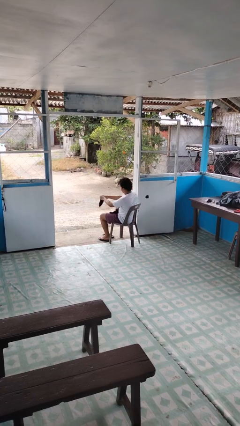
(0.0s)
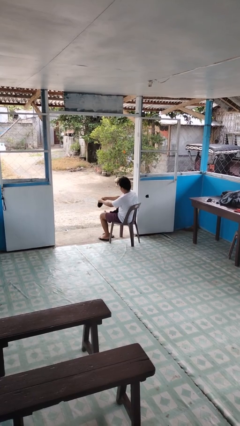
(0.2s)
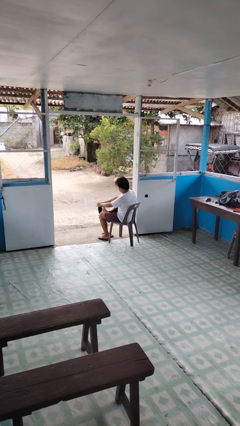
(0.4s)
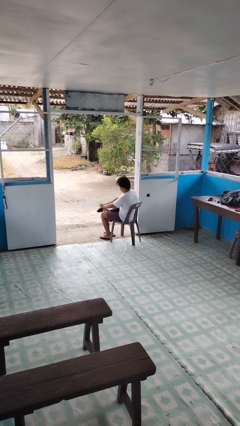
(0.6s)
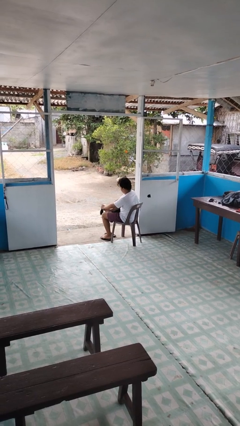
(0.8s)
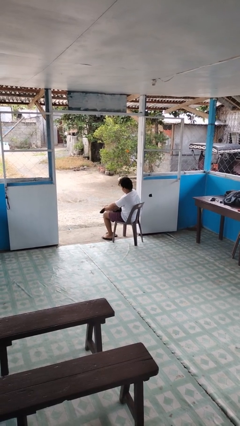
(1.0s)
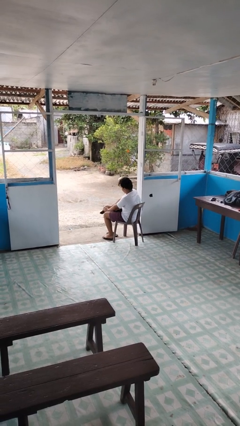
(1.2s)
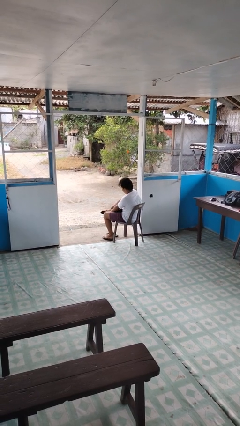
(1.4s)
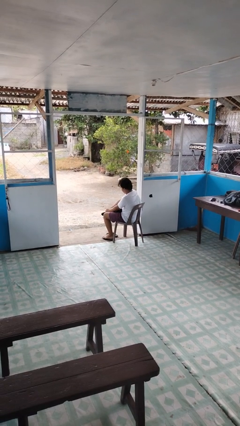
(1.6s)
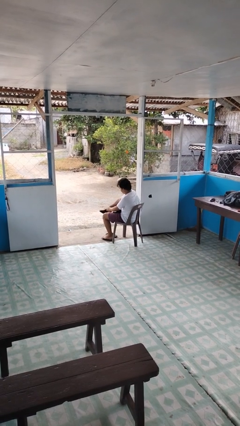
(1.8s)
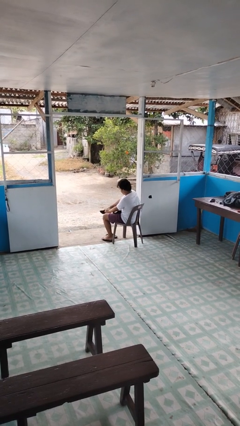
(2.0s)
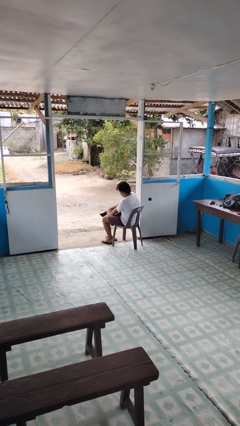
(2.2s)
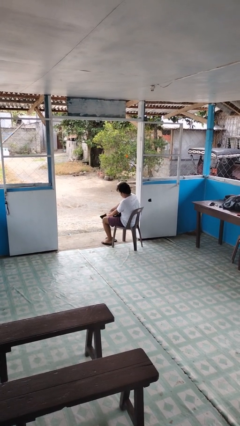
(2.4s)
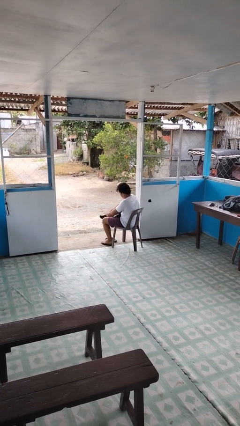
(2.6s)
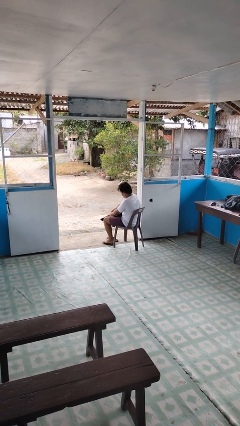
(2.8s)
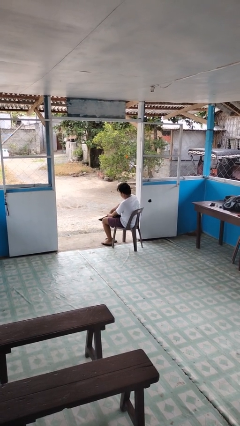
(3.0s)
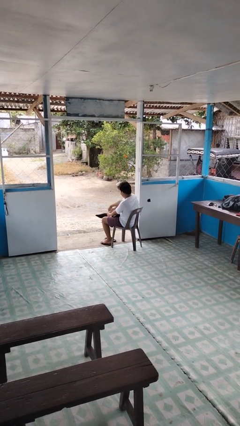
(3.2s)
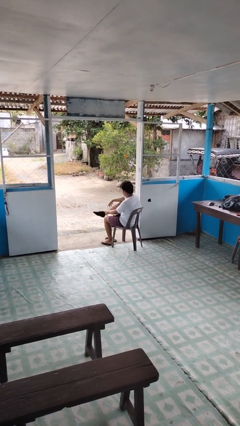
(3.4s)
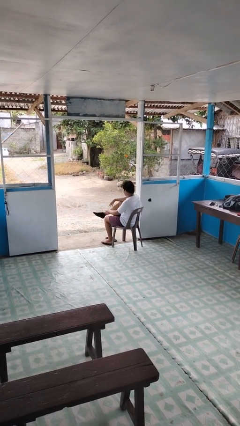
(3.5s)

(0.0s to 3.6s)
person puts on socks

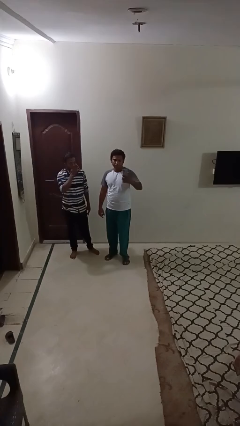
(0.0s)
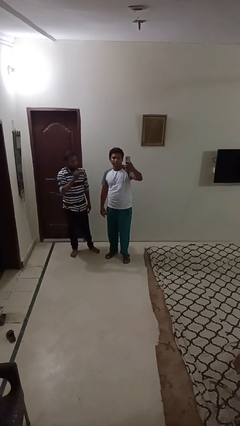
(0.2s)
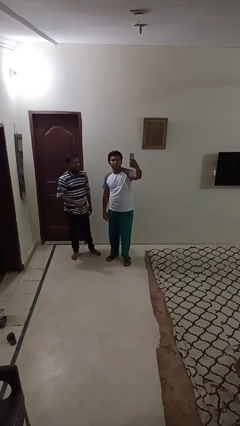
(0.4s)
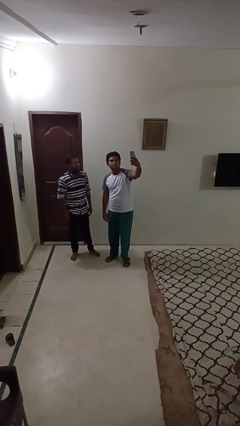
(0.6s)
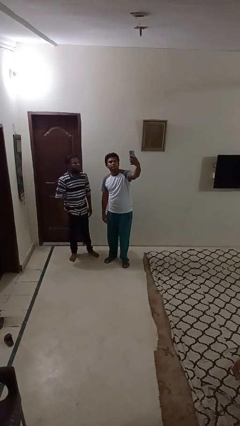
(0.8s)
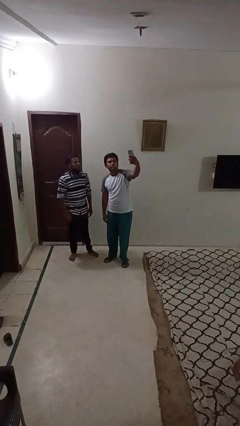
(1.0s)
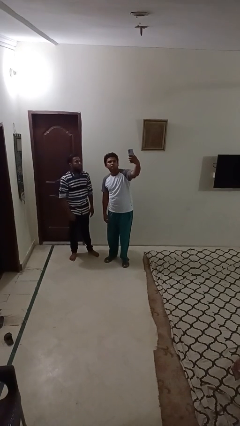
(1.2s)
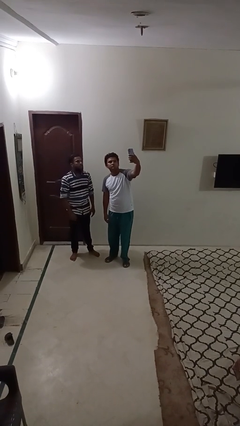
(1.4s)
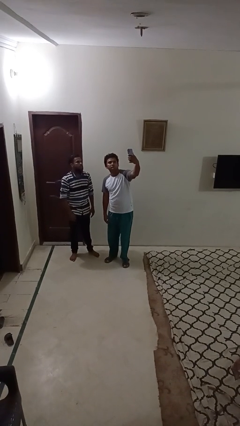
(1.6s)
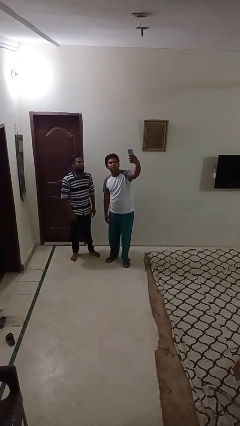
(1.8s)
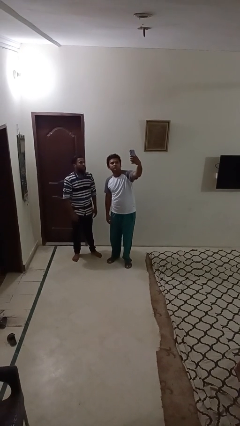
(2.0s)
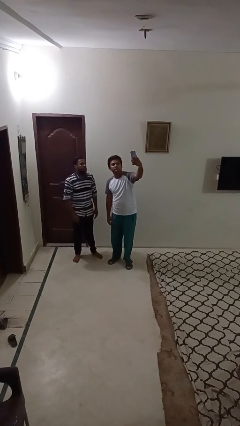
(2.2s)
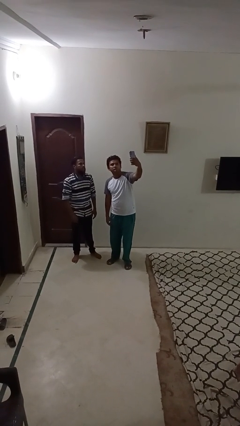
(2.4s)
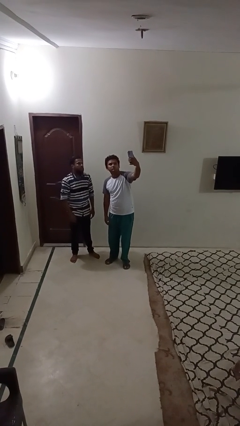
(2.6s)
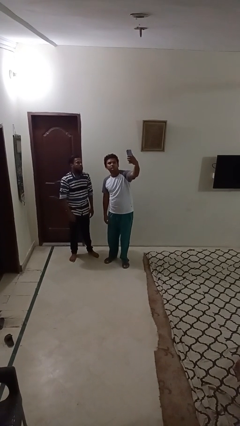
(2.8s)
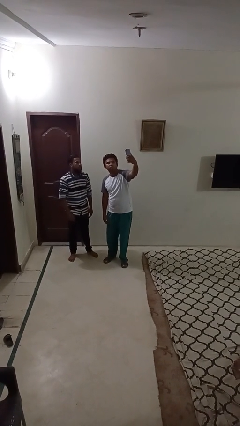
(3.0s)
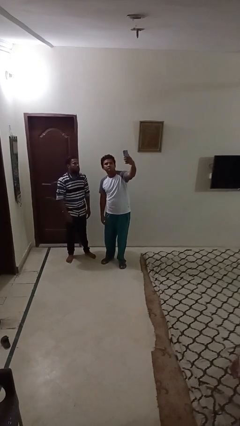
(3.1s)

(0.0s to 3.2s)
person takes selfie with person

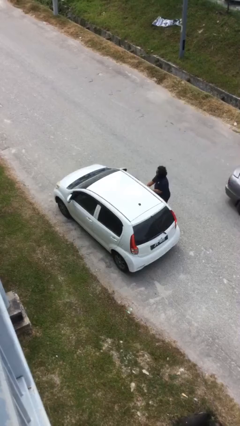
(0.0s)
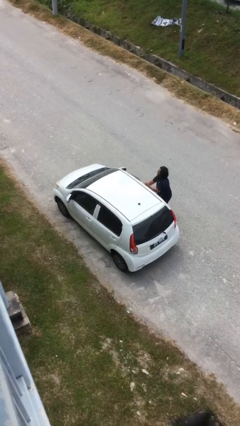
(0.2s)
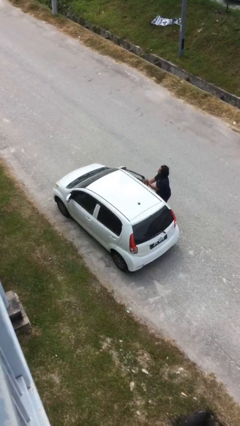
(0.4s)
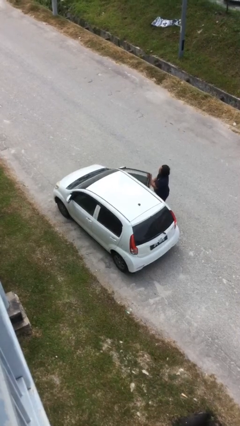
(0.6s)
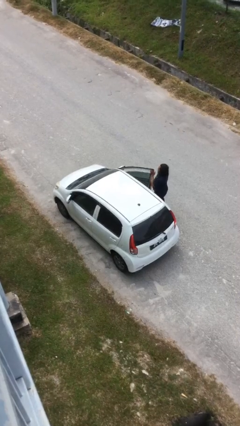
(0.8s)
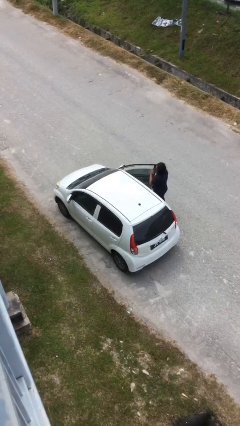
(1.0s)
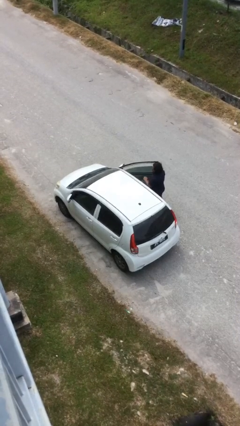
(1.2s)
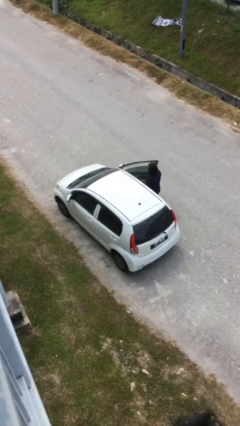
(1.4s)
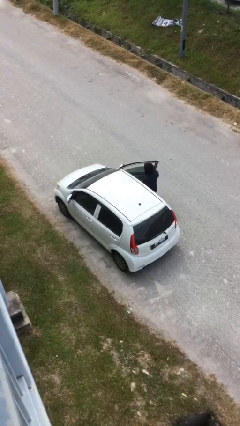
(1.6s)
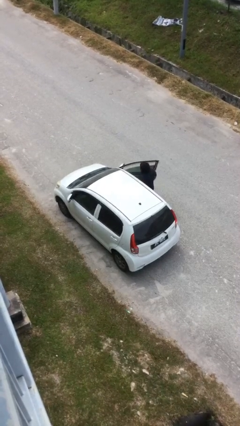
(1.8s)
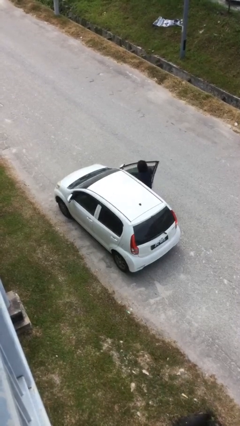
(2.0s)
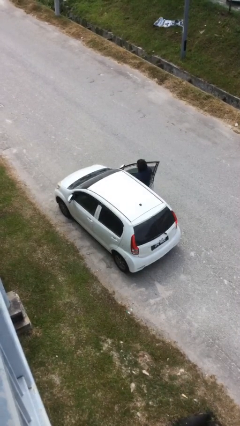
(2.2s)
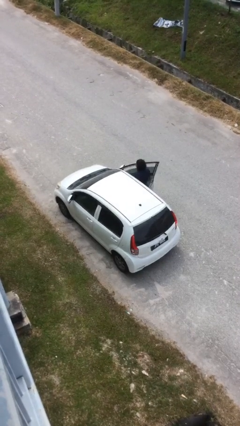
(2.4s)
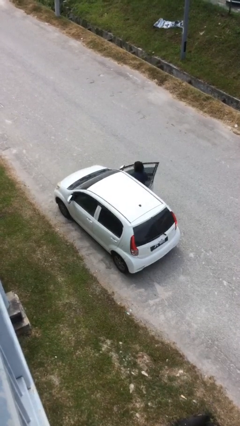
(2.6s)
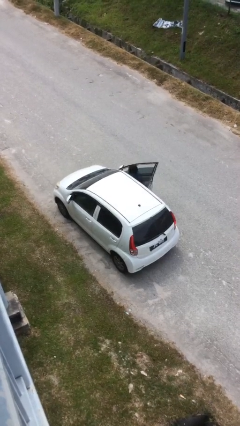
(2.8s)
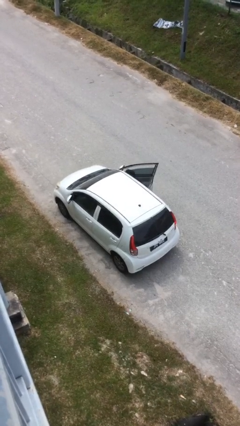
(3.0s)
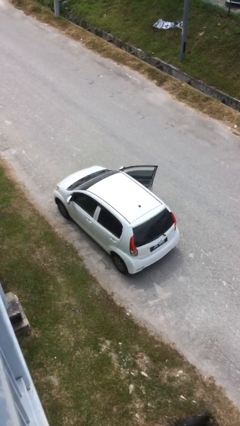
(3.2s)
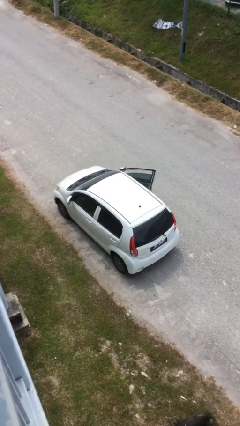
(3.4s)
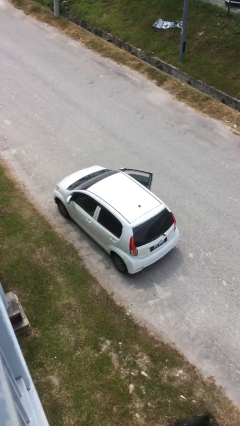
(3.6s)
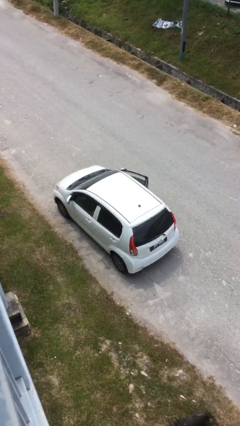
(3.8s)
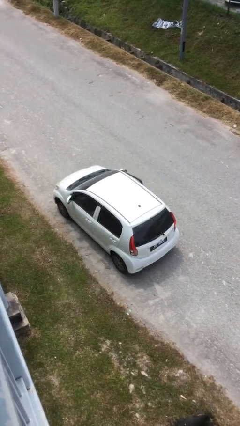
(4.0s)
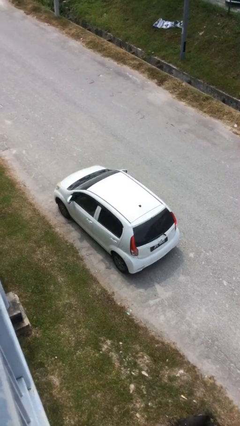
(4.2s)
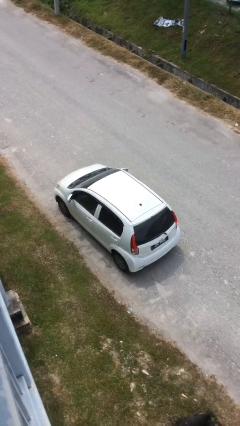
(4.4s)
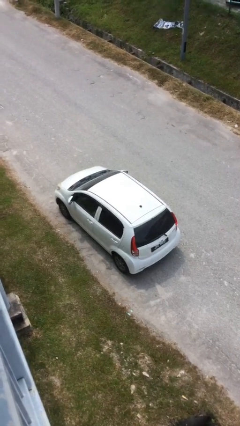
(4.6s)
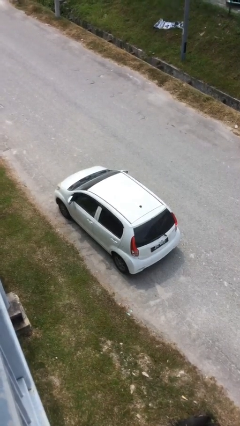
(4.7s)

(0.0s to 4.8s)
car picks up person

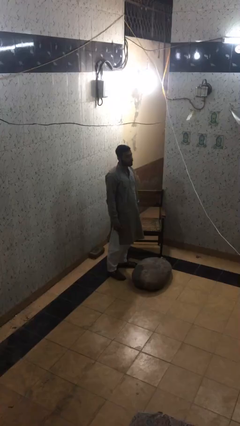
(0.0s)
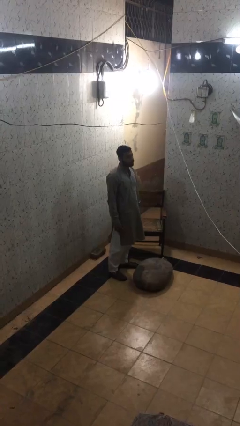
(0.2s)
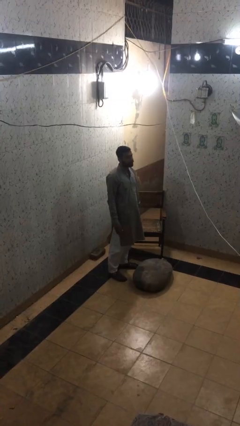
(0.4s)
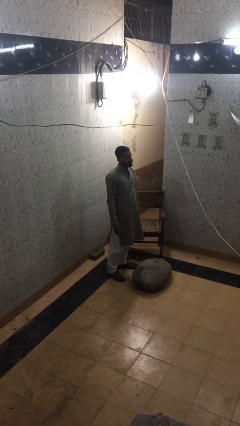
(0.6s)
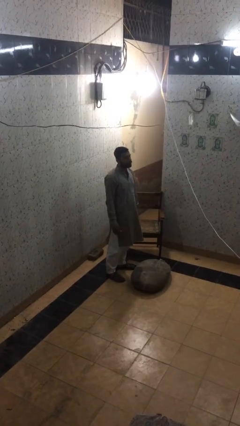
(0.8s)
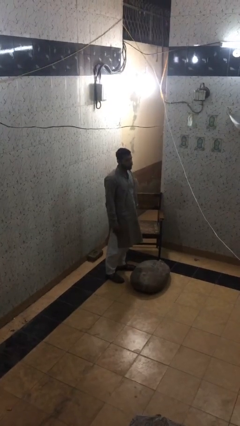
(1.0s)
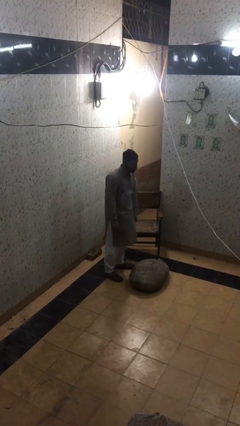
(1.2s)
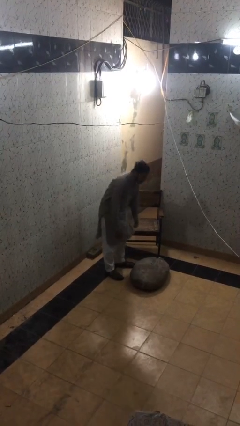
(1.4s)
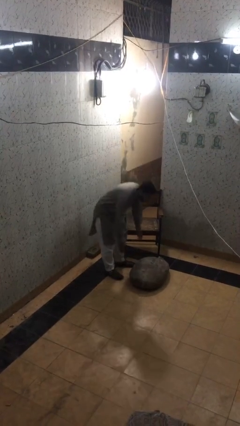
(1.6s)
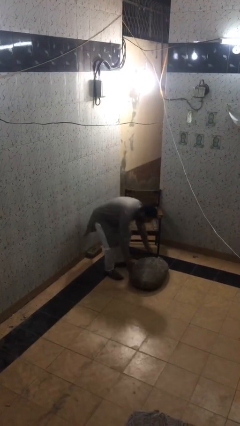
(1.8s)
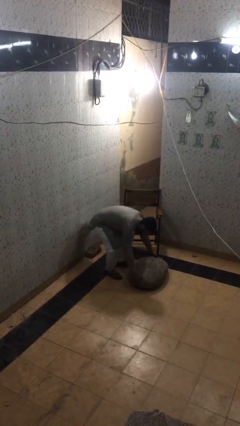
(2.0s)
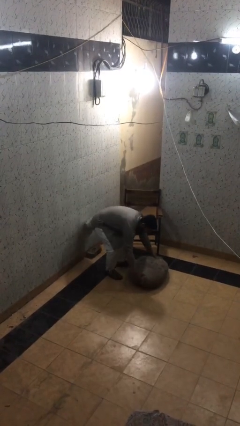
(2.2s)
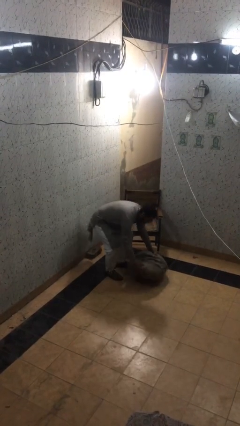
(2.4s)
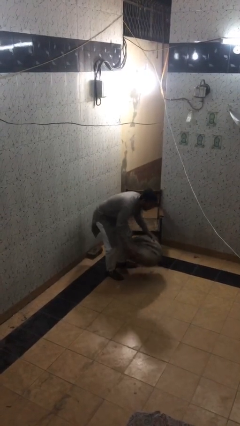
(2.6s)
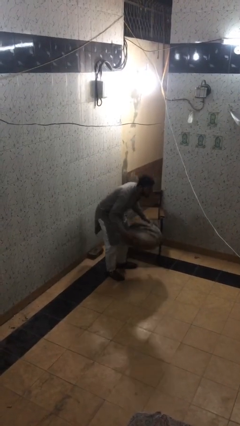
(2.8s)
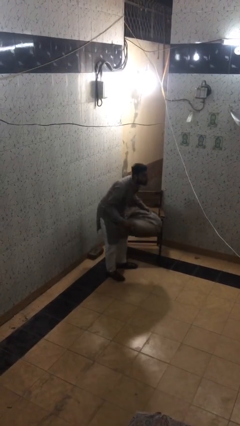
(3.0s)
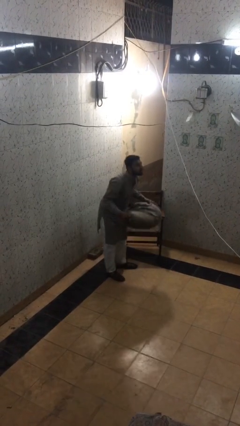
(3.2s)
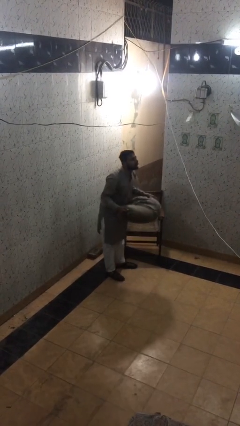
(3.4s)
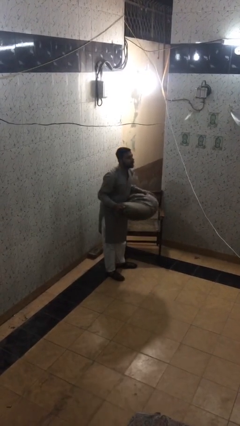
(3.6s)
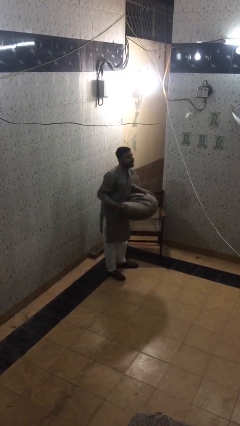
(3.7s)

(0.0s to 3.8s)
person picks up object from floor

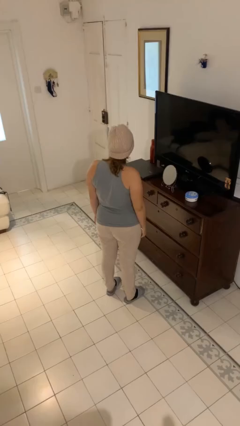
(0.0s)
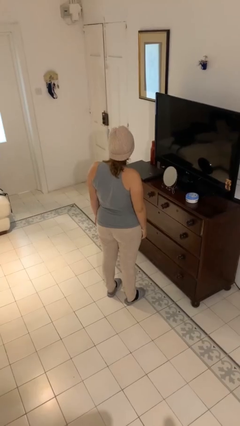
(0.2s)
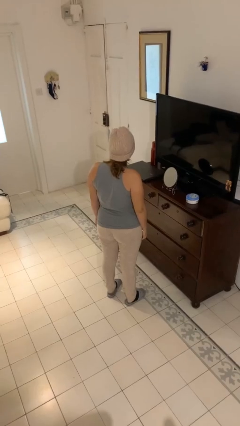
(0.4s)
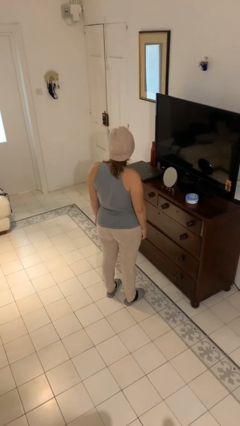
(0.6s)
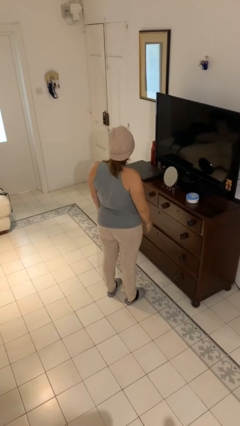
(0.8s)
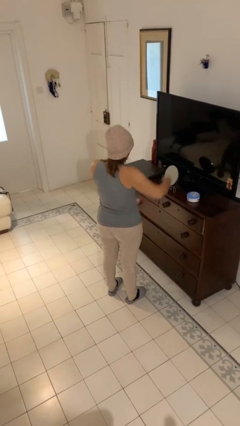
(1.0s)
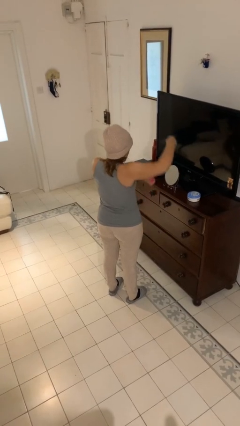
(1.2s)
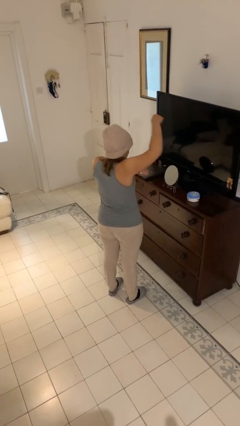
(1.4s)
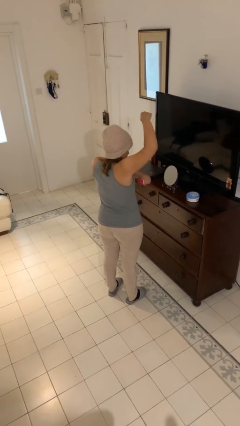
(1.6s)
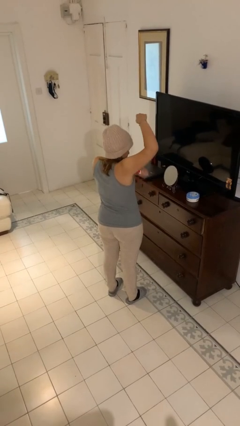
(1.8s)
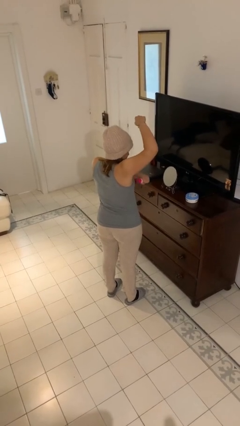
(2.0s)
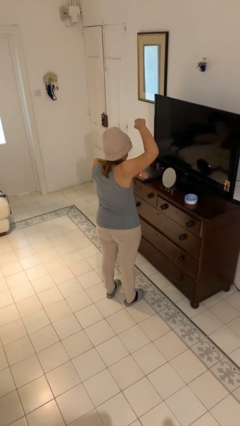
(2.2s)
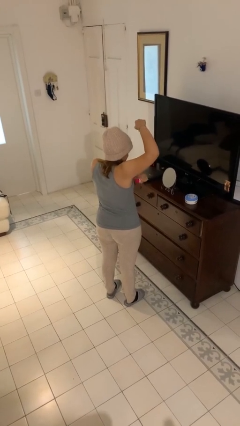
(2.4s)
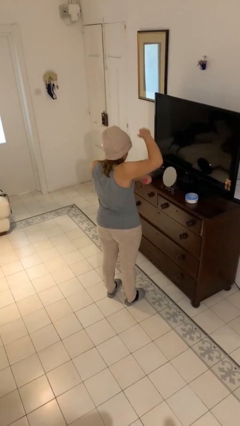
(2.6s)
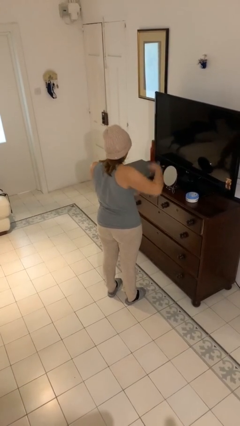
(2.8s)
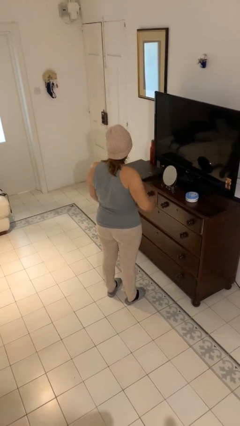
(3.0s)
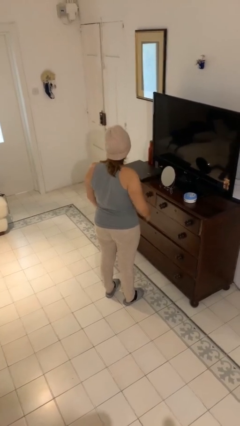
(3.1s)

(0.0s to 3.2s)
person applies deodorant
